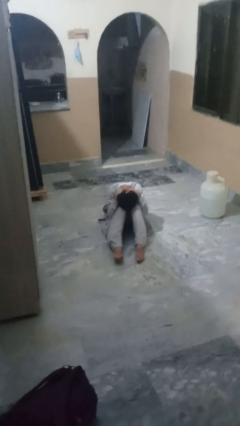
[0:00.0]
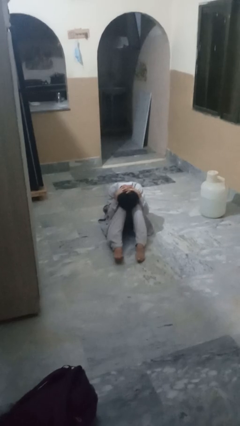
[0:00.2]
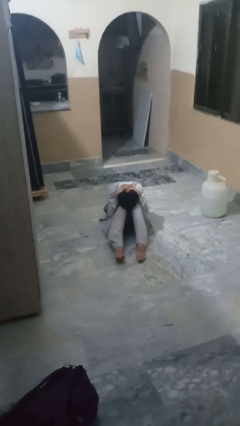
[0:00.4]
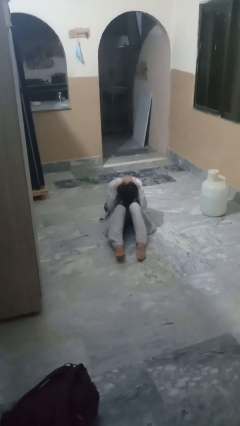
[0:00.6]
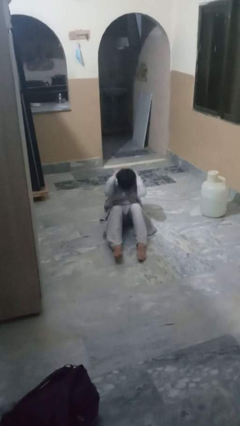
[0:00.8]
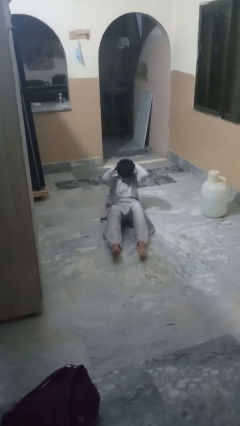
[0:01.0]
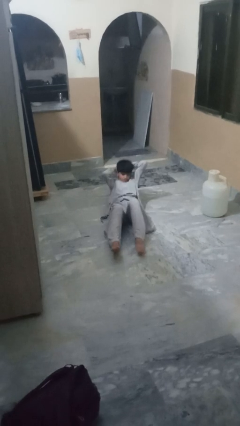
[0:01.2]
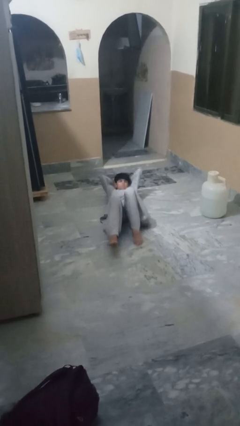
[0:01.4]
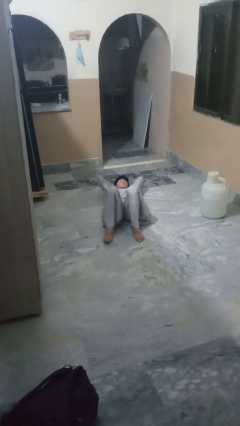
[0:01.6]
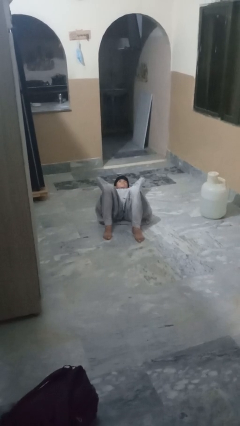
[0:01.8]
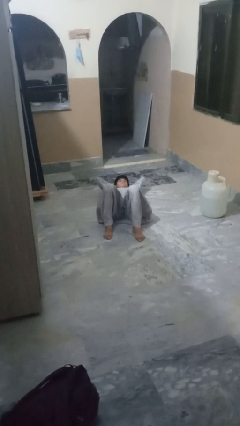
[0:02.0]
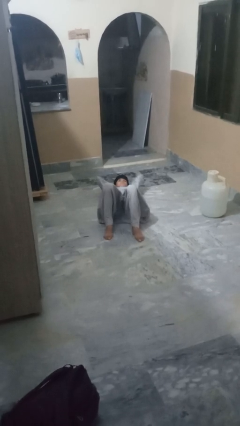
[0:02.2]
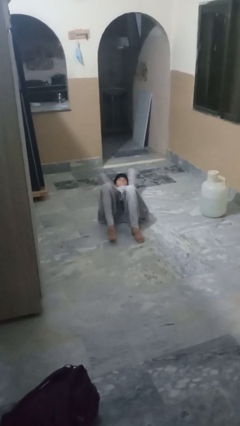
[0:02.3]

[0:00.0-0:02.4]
person exercises with situp

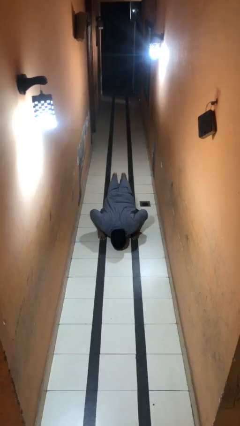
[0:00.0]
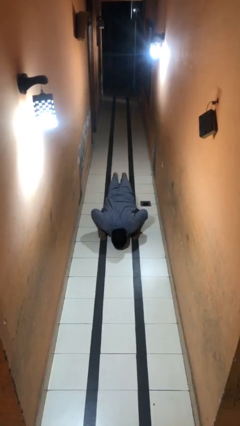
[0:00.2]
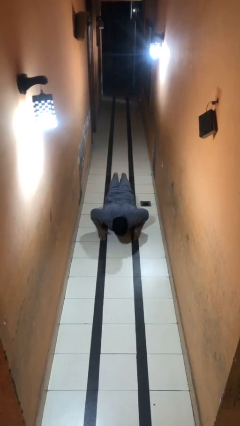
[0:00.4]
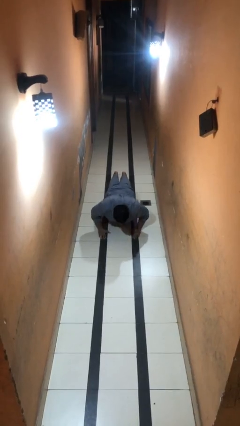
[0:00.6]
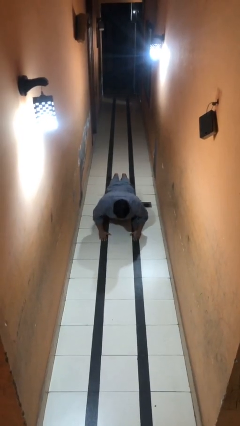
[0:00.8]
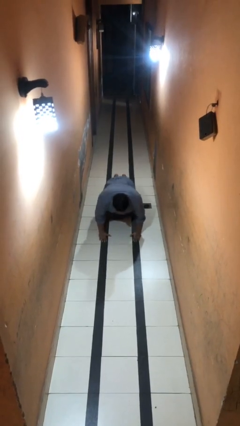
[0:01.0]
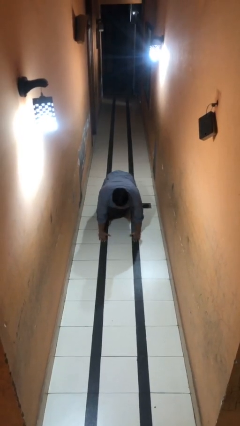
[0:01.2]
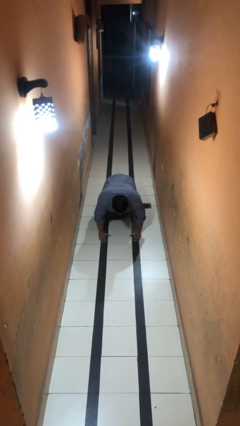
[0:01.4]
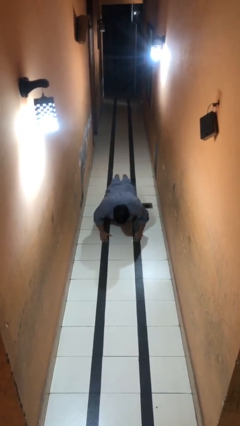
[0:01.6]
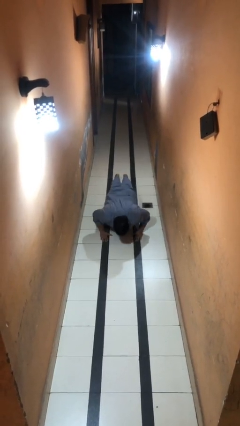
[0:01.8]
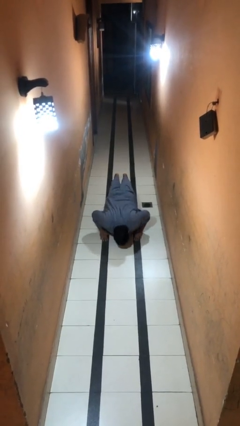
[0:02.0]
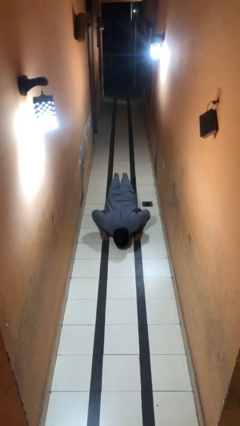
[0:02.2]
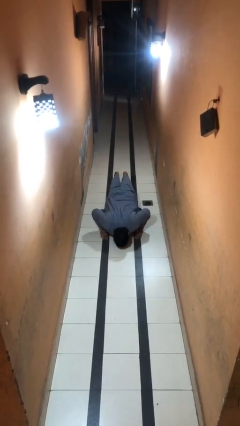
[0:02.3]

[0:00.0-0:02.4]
person exercises with pushup

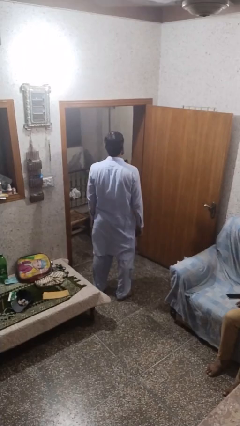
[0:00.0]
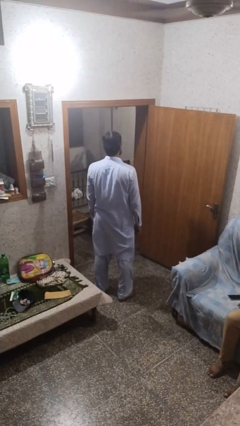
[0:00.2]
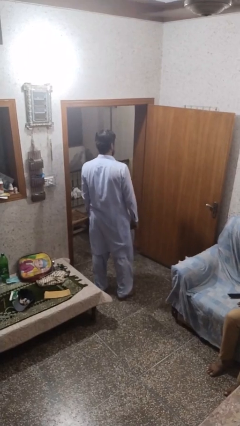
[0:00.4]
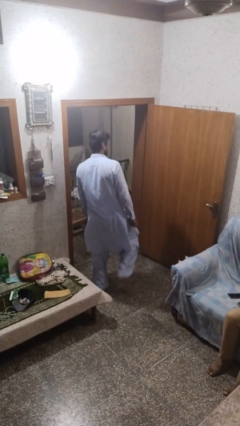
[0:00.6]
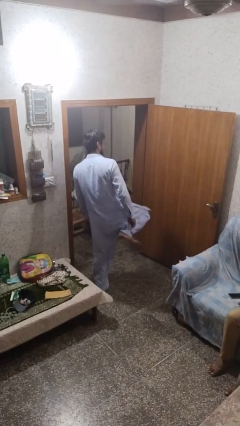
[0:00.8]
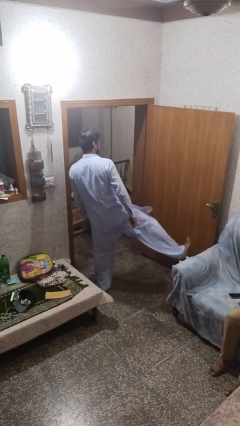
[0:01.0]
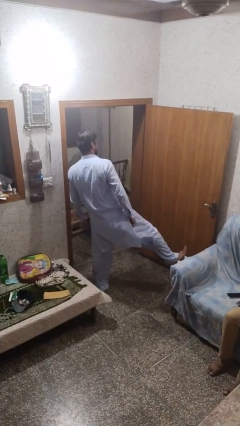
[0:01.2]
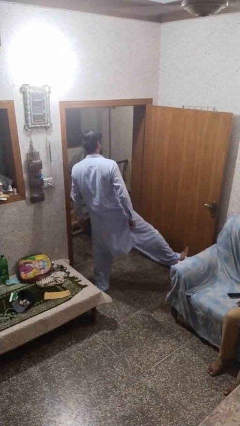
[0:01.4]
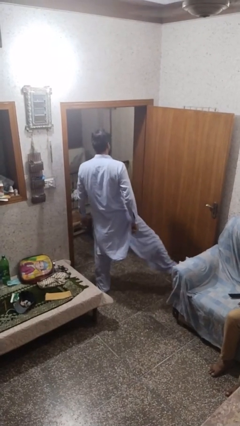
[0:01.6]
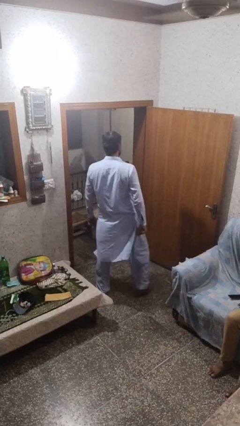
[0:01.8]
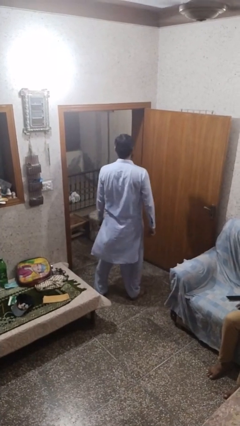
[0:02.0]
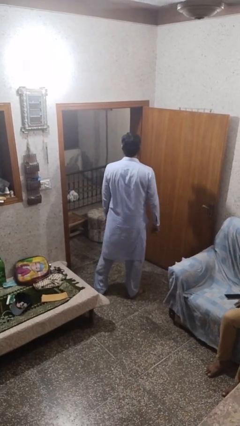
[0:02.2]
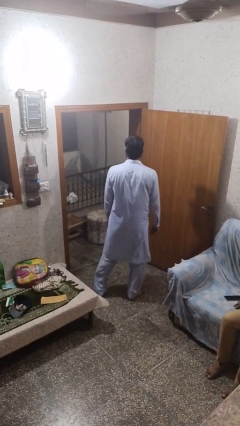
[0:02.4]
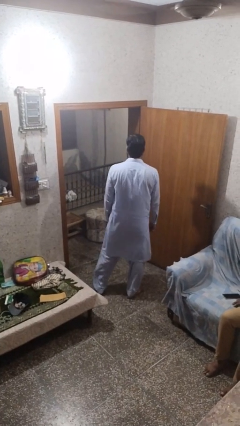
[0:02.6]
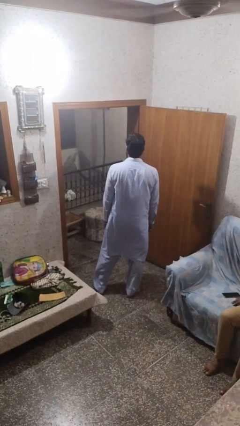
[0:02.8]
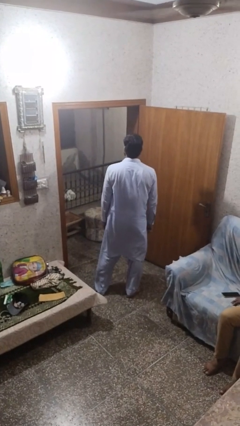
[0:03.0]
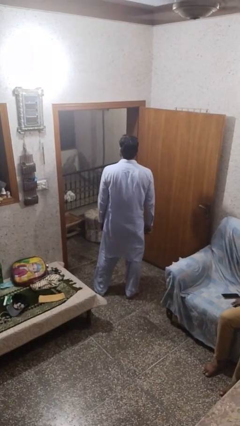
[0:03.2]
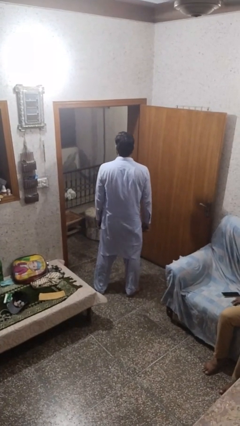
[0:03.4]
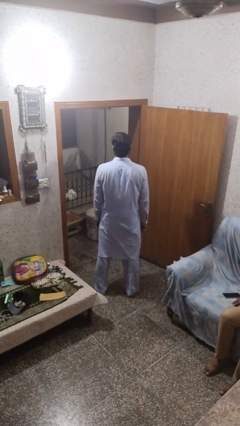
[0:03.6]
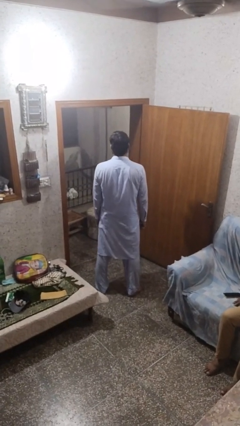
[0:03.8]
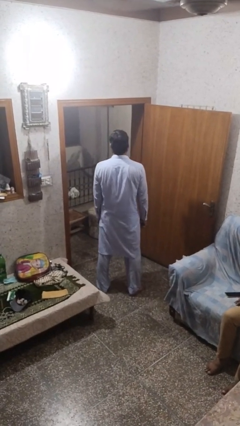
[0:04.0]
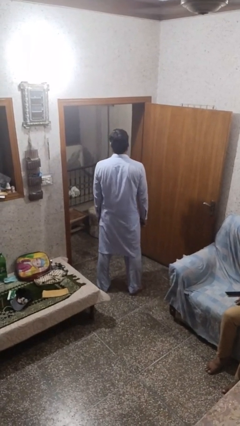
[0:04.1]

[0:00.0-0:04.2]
person karate kicks

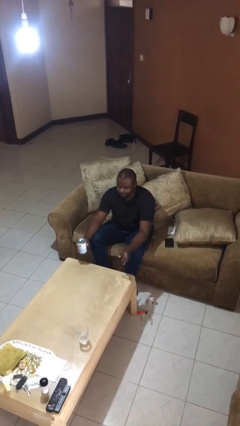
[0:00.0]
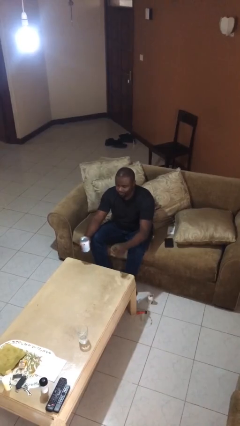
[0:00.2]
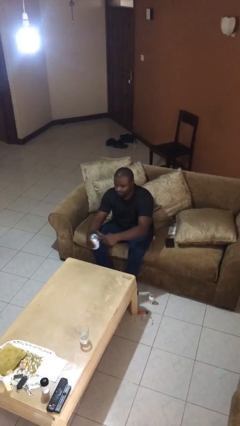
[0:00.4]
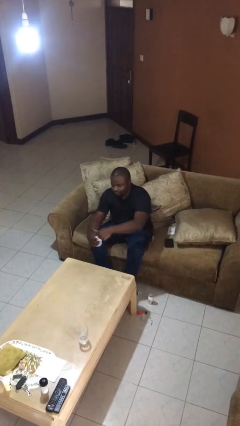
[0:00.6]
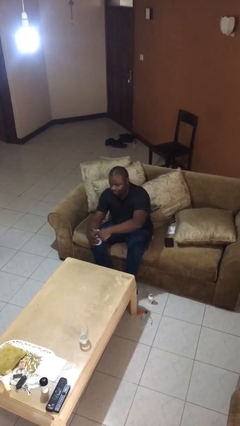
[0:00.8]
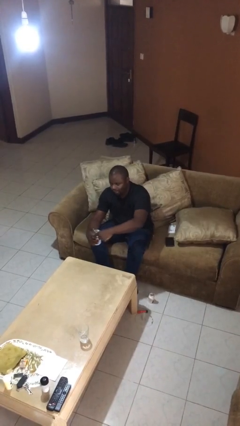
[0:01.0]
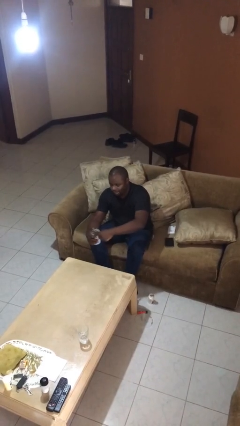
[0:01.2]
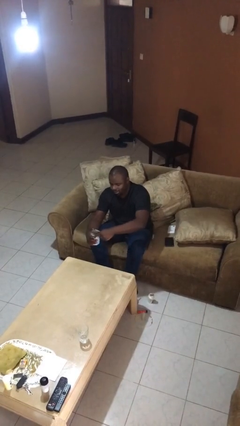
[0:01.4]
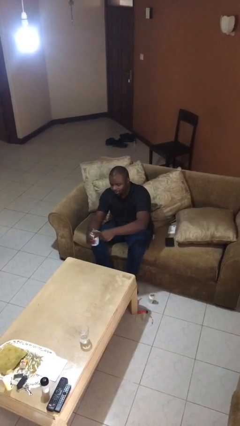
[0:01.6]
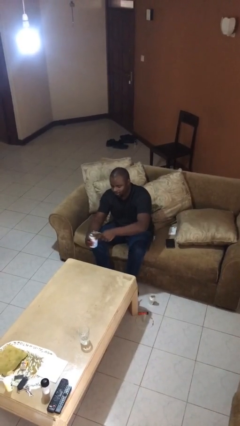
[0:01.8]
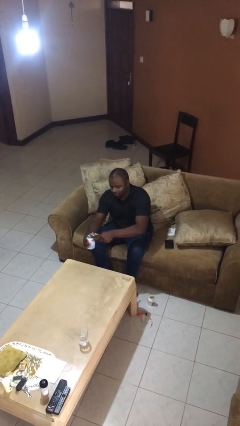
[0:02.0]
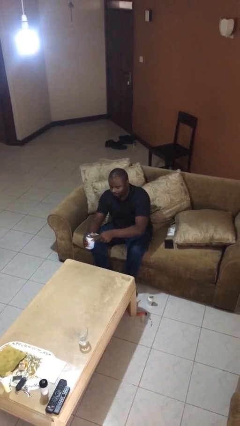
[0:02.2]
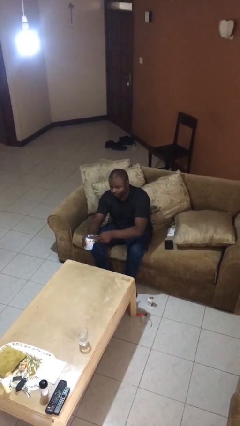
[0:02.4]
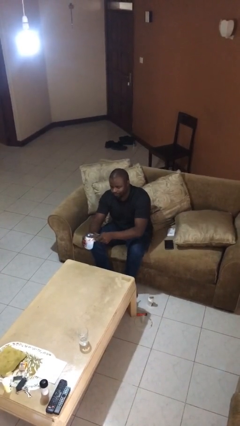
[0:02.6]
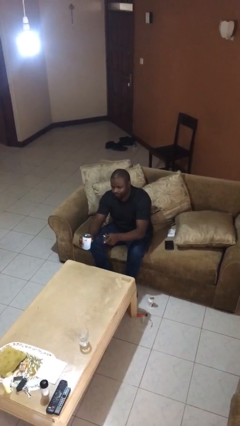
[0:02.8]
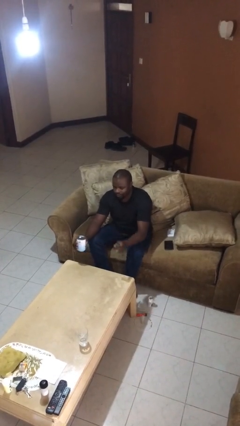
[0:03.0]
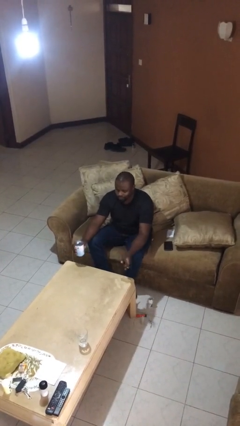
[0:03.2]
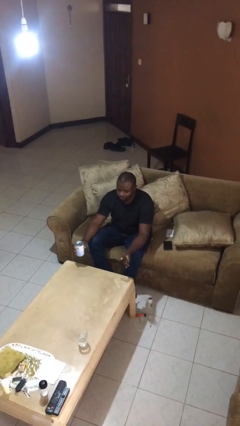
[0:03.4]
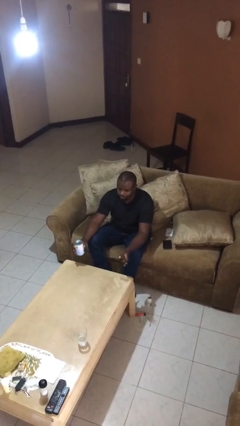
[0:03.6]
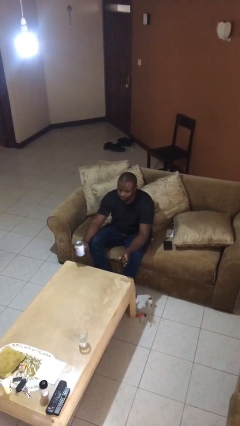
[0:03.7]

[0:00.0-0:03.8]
person opens can with can opener

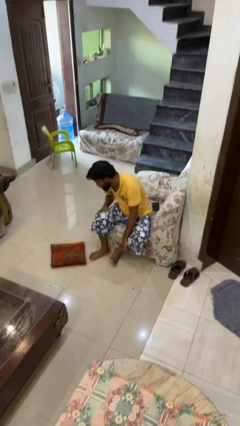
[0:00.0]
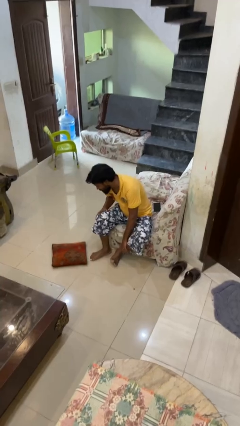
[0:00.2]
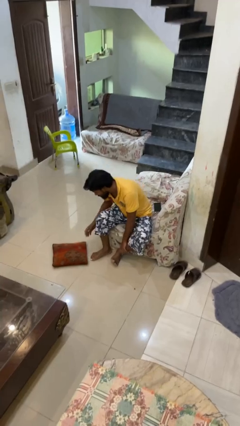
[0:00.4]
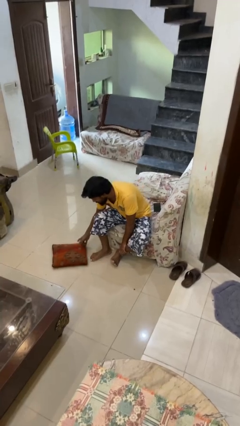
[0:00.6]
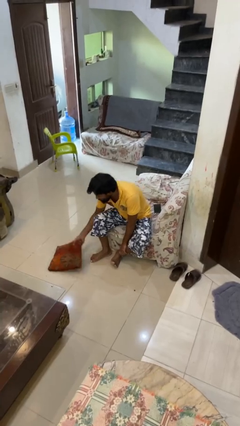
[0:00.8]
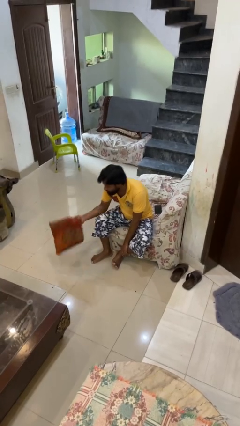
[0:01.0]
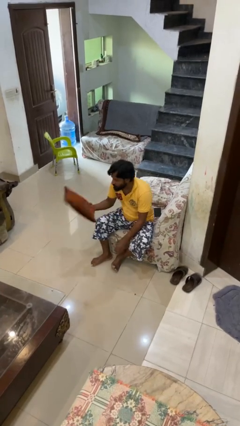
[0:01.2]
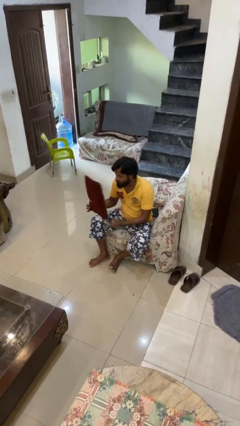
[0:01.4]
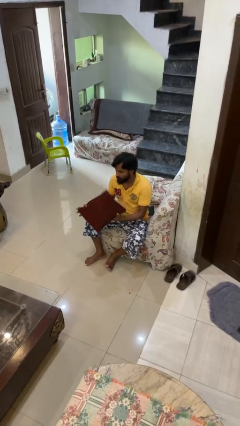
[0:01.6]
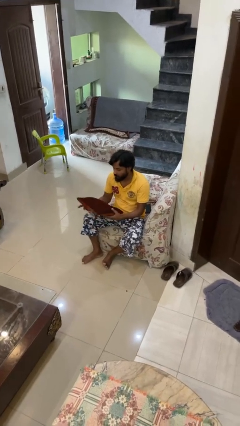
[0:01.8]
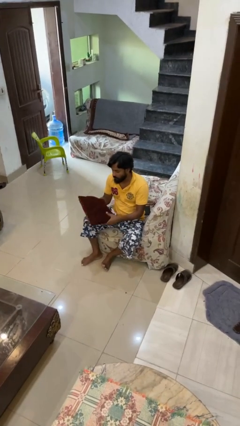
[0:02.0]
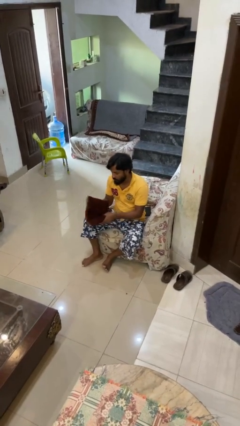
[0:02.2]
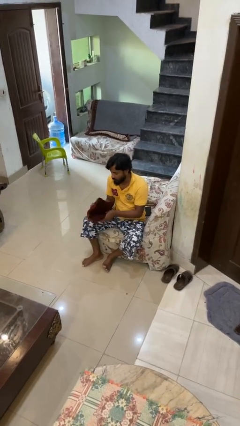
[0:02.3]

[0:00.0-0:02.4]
person picks up object from floor

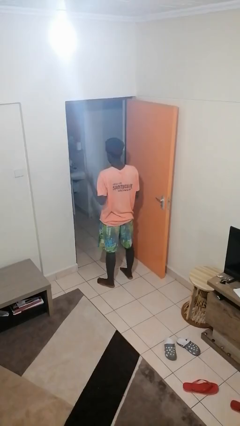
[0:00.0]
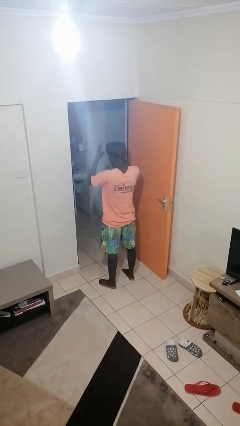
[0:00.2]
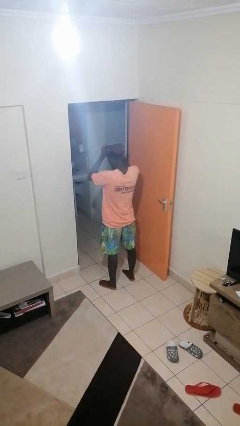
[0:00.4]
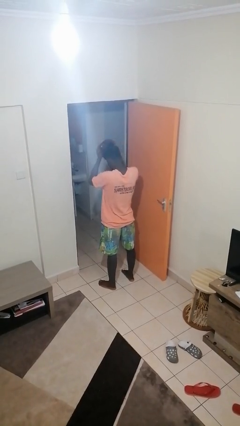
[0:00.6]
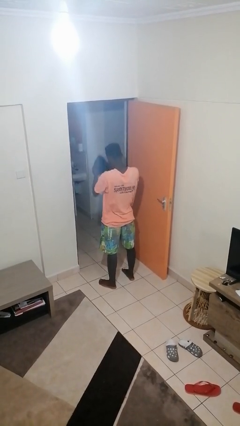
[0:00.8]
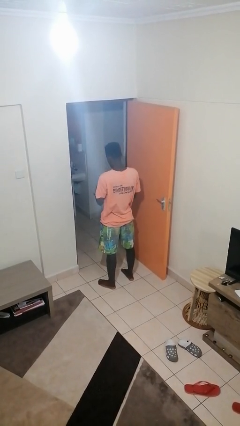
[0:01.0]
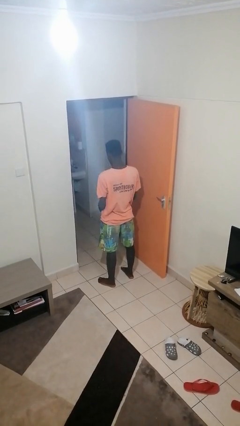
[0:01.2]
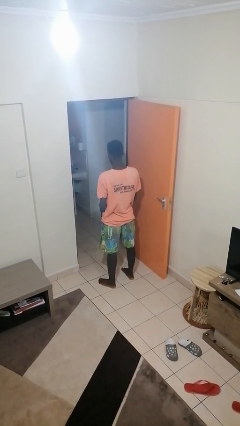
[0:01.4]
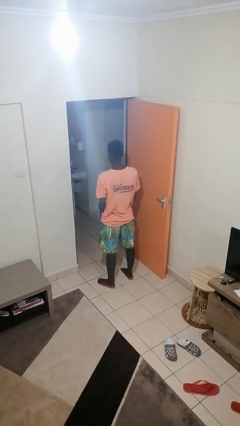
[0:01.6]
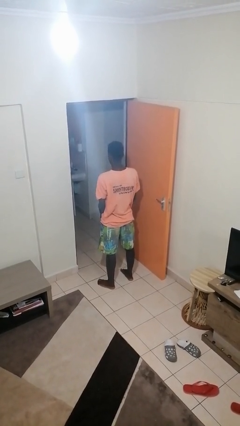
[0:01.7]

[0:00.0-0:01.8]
person takes off hat

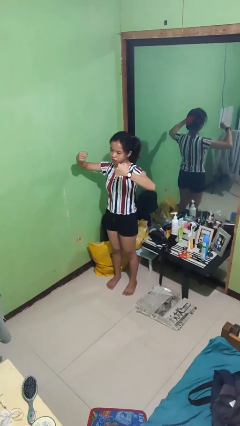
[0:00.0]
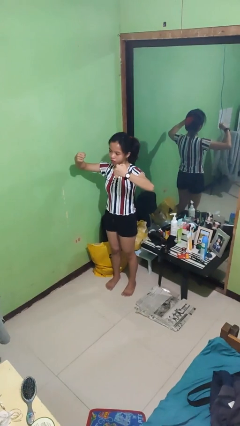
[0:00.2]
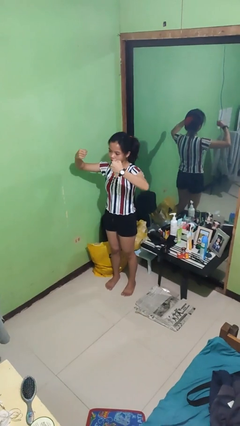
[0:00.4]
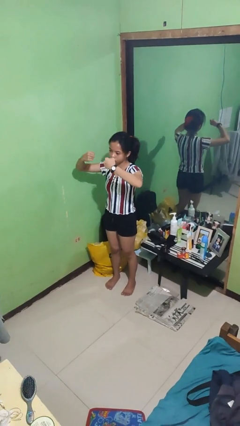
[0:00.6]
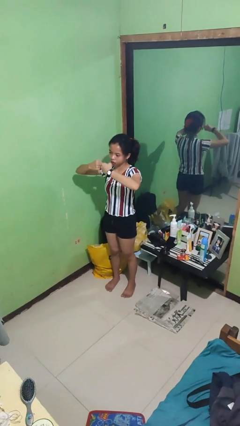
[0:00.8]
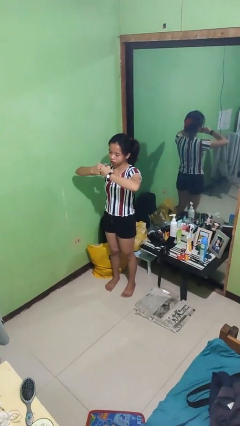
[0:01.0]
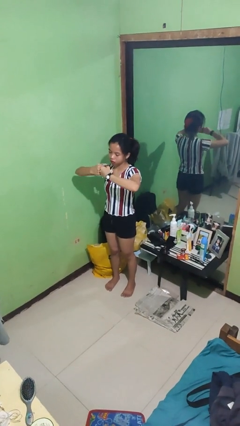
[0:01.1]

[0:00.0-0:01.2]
person gestures zoom out
